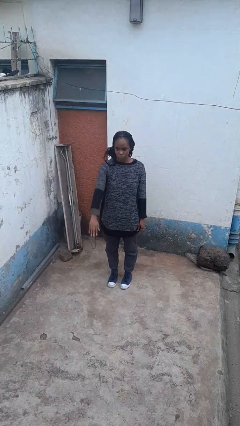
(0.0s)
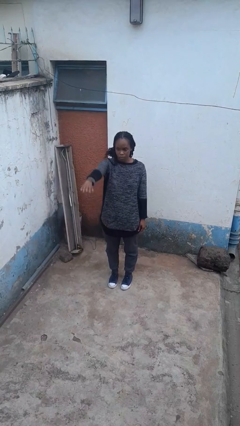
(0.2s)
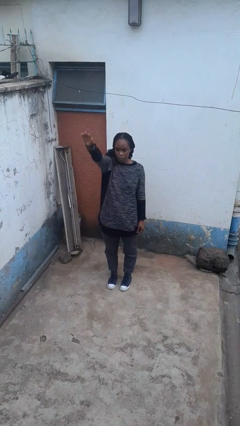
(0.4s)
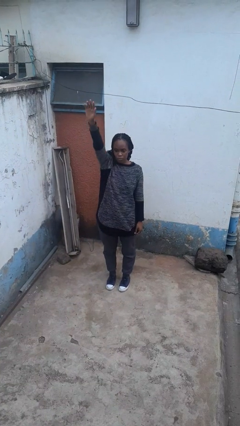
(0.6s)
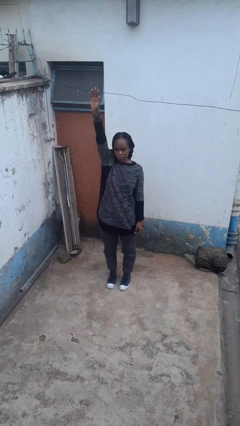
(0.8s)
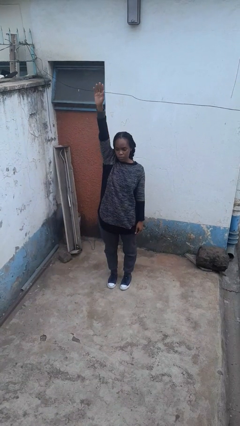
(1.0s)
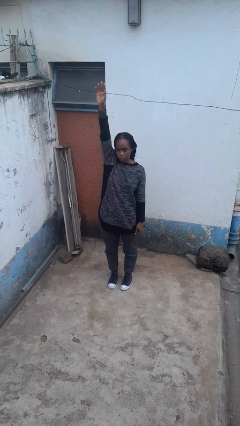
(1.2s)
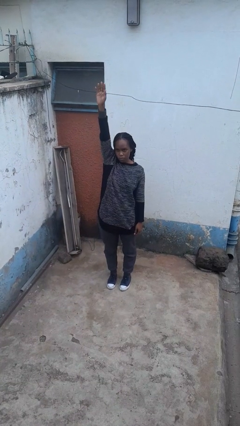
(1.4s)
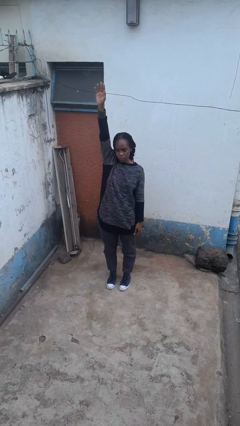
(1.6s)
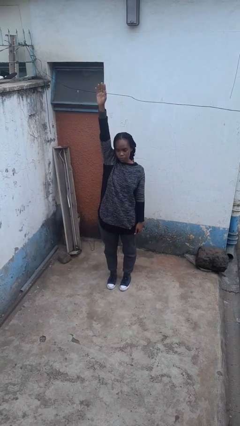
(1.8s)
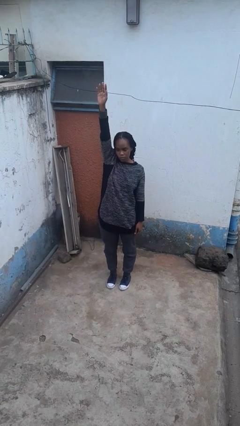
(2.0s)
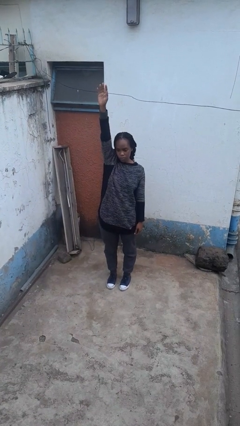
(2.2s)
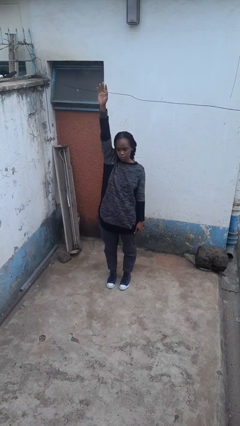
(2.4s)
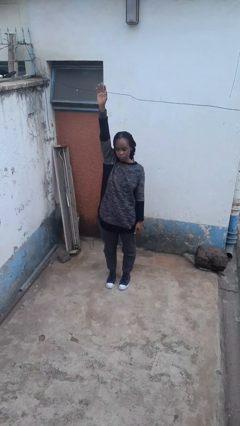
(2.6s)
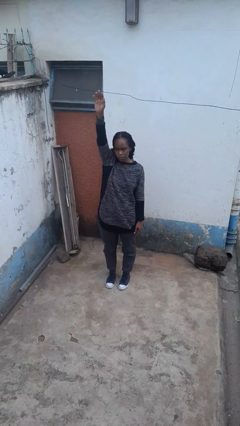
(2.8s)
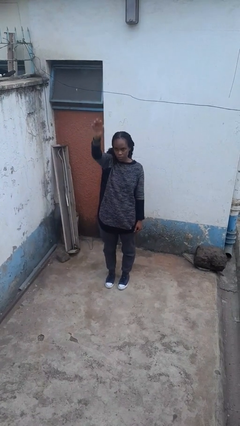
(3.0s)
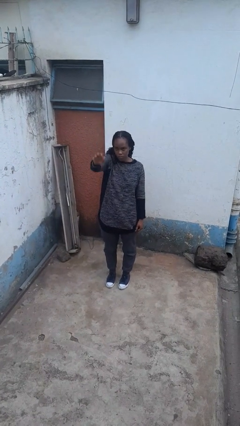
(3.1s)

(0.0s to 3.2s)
person gestures raise hand

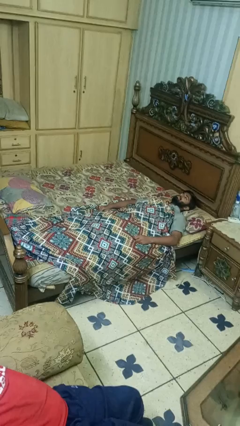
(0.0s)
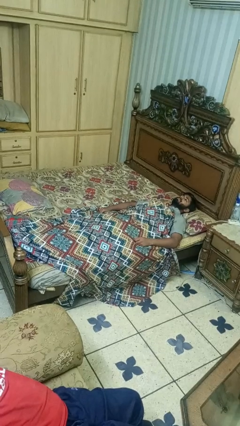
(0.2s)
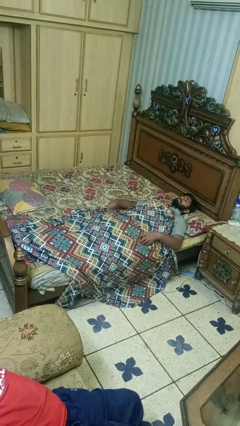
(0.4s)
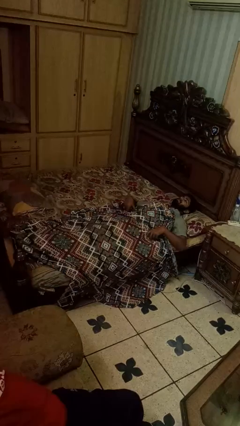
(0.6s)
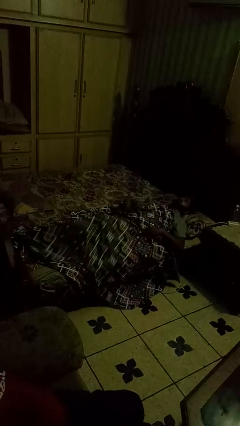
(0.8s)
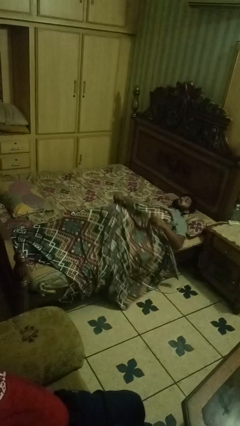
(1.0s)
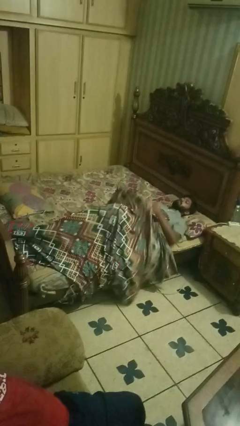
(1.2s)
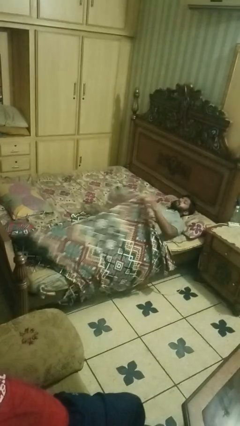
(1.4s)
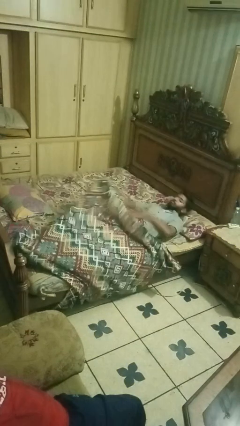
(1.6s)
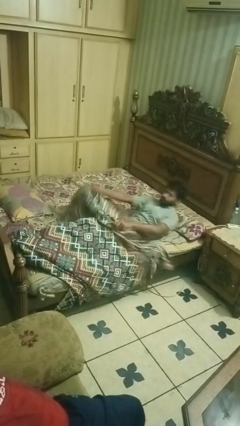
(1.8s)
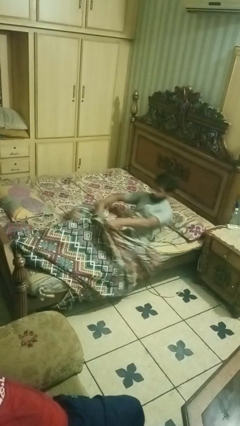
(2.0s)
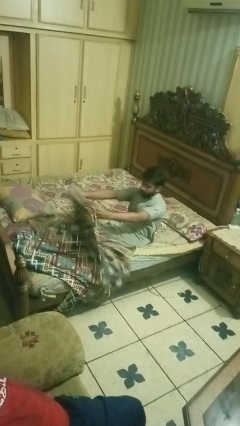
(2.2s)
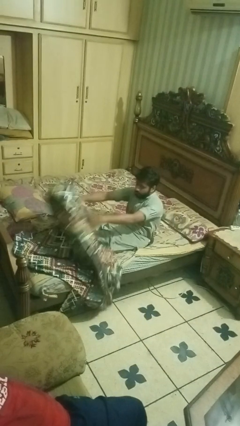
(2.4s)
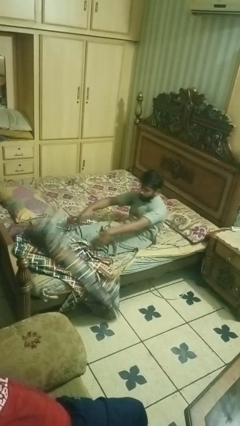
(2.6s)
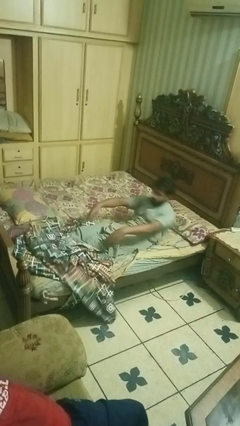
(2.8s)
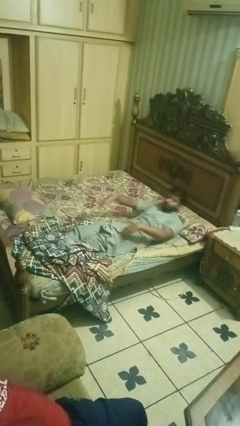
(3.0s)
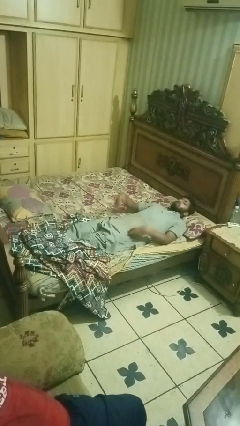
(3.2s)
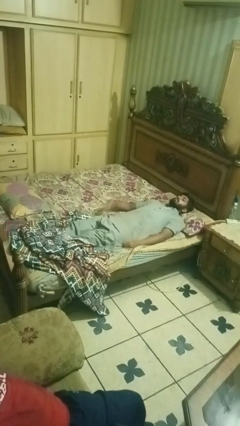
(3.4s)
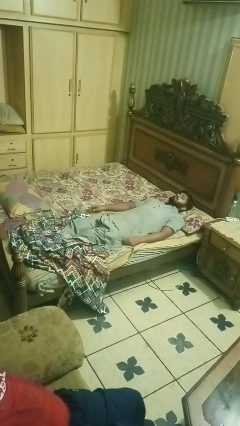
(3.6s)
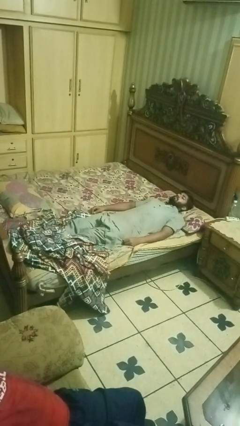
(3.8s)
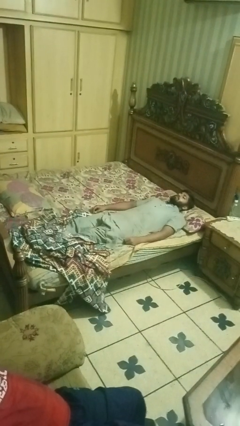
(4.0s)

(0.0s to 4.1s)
person uncovers with bedsheets

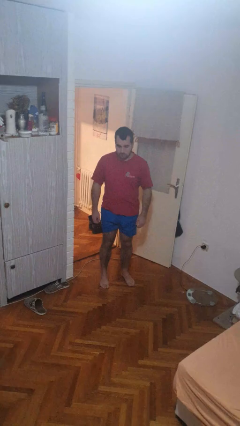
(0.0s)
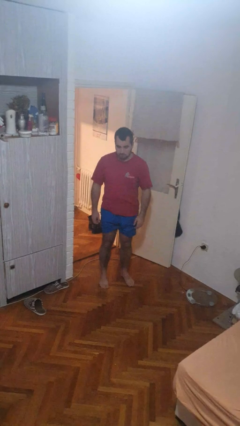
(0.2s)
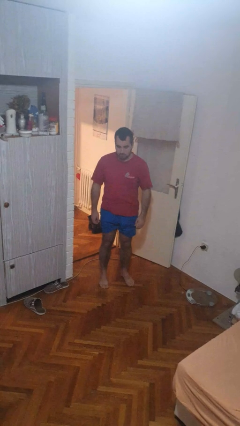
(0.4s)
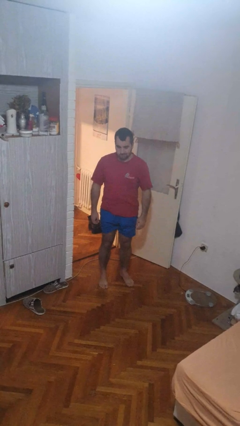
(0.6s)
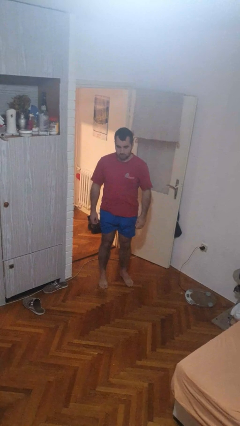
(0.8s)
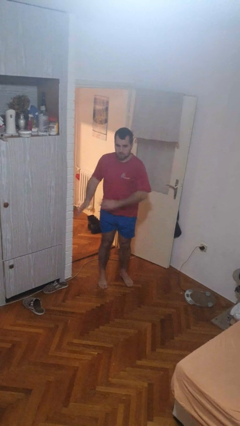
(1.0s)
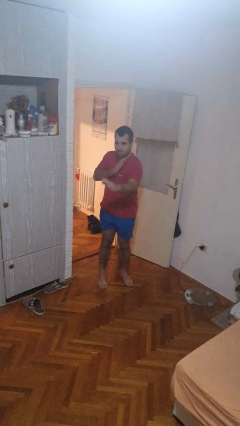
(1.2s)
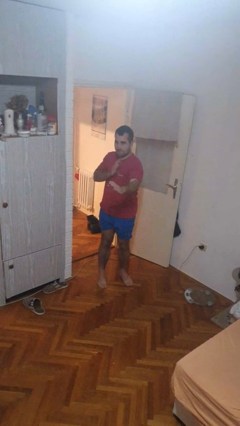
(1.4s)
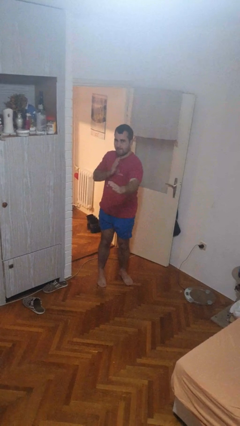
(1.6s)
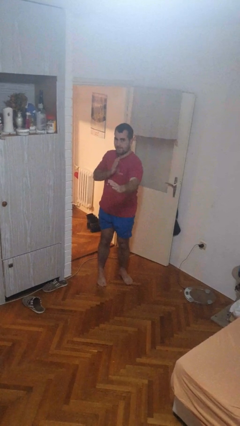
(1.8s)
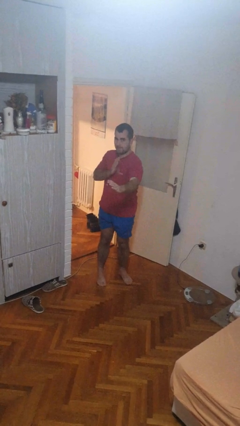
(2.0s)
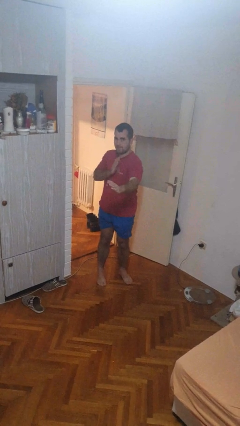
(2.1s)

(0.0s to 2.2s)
person karate chop

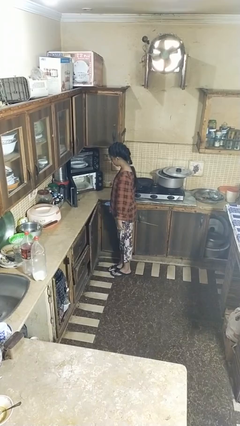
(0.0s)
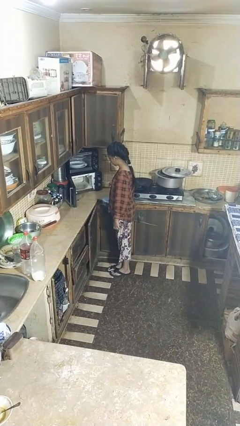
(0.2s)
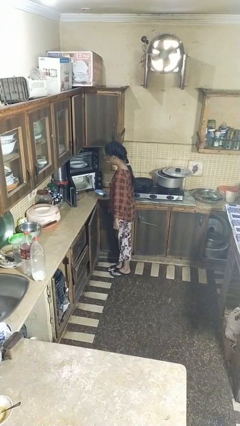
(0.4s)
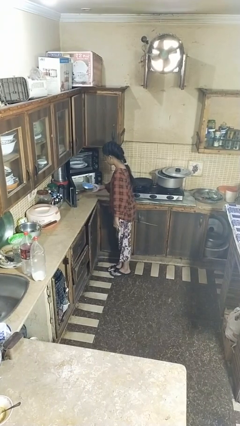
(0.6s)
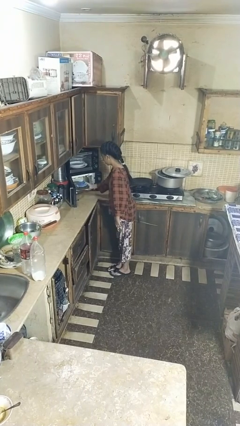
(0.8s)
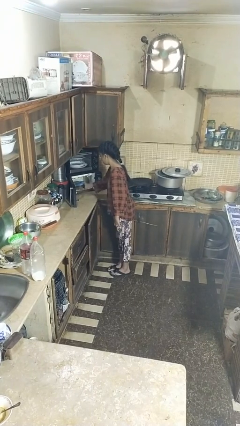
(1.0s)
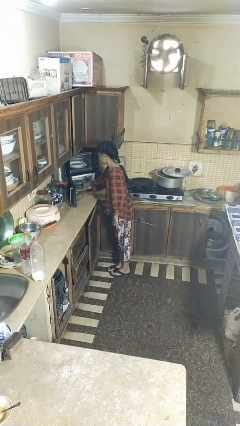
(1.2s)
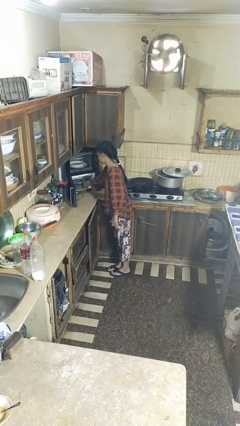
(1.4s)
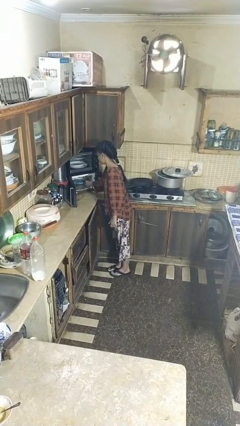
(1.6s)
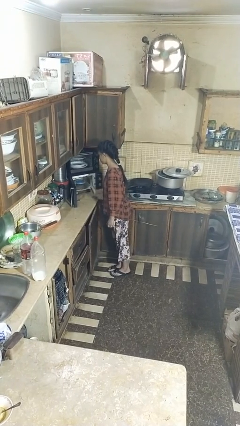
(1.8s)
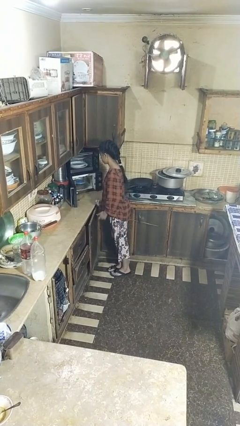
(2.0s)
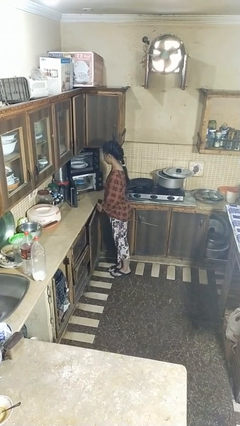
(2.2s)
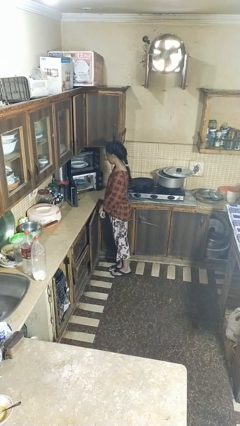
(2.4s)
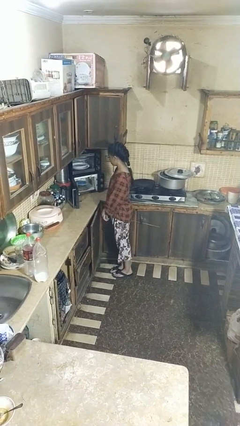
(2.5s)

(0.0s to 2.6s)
person puts object into microwave

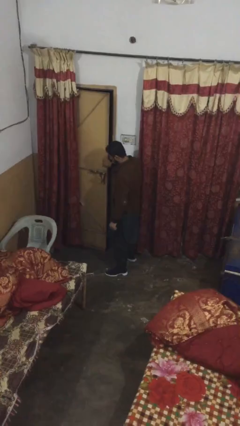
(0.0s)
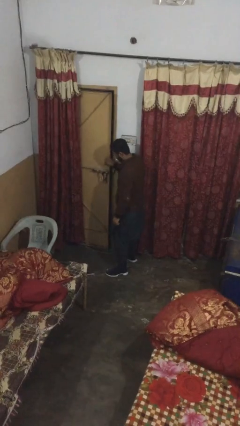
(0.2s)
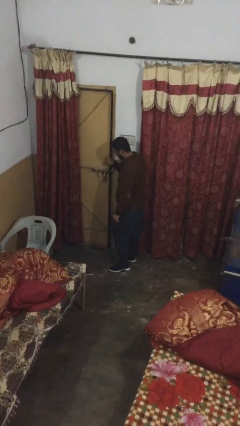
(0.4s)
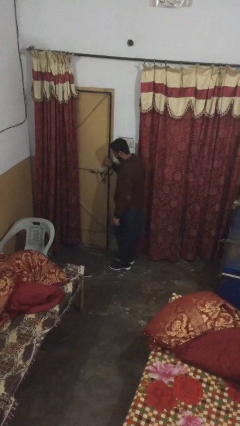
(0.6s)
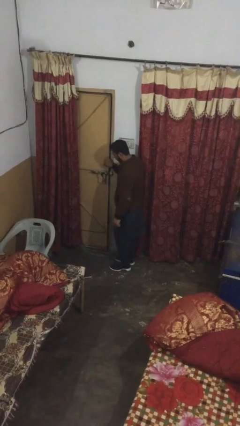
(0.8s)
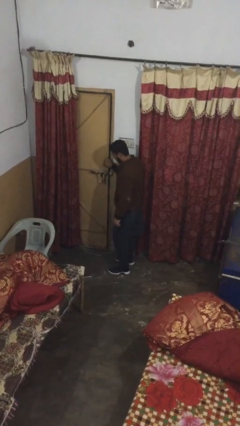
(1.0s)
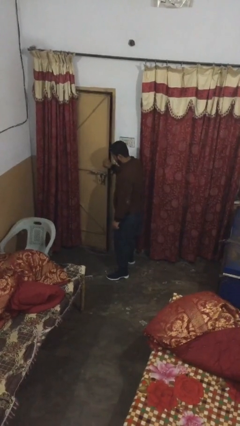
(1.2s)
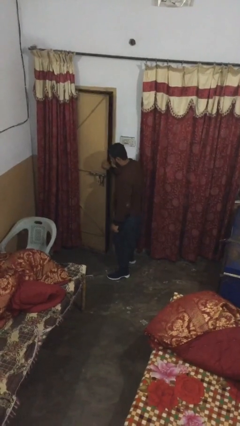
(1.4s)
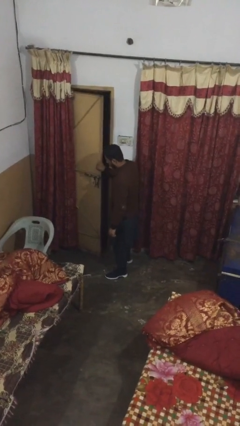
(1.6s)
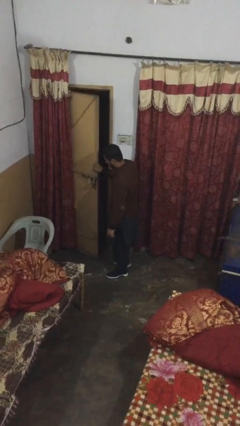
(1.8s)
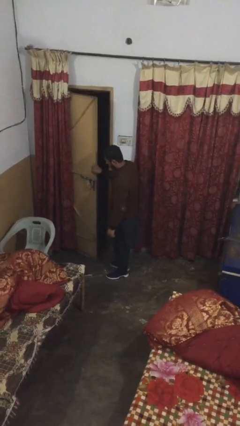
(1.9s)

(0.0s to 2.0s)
person opens facility door

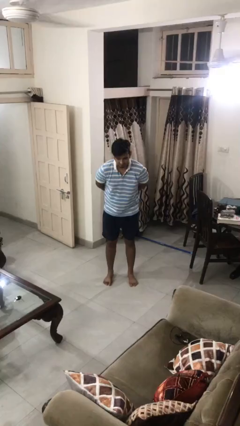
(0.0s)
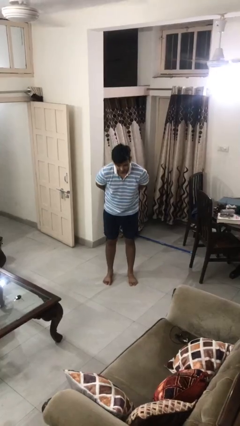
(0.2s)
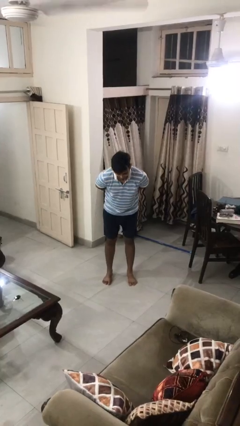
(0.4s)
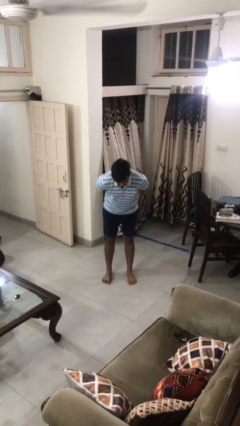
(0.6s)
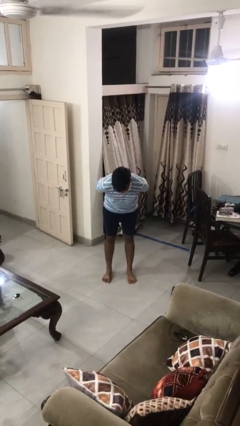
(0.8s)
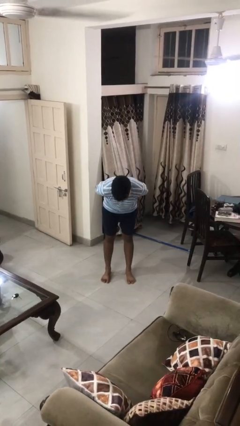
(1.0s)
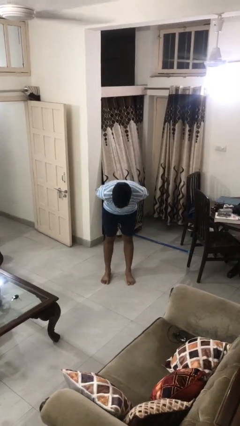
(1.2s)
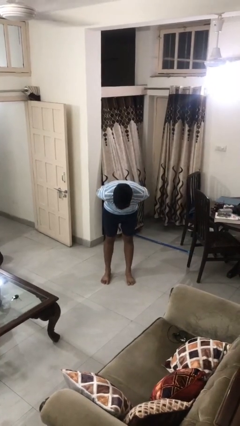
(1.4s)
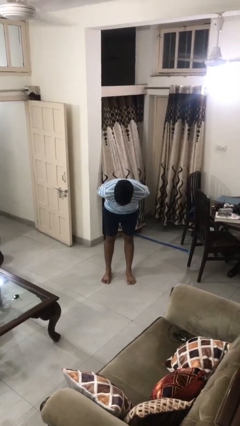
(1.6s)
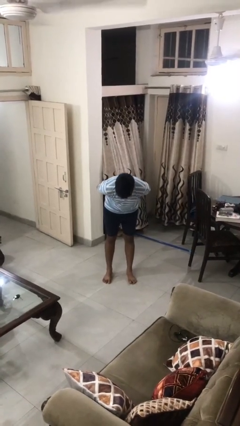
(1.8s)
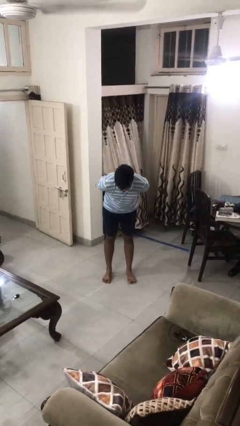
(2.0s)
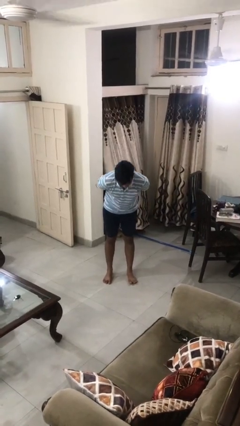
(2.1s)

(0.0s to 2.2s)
person bows

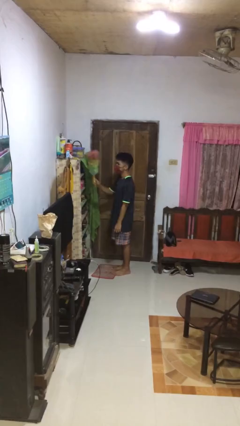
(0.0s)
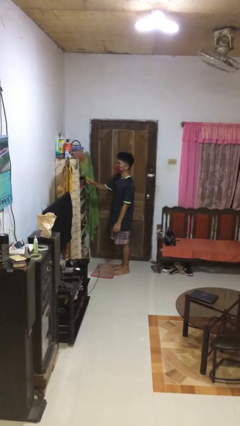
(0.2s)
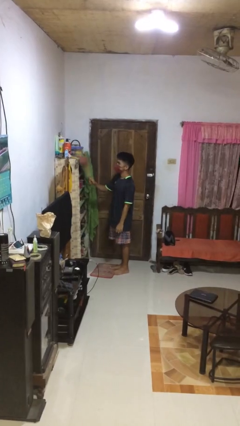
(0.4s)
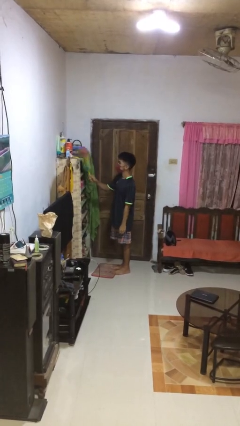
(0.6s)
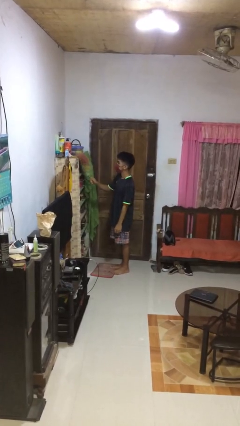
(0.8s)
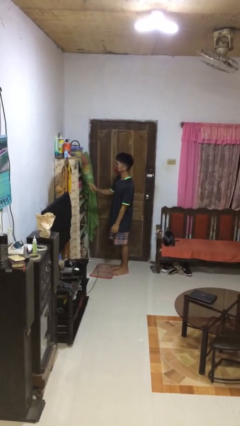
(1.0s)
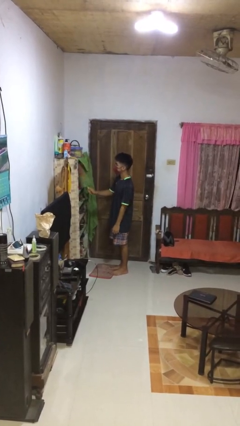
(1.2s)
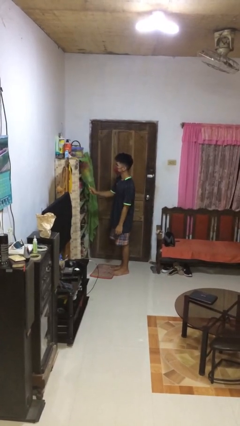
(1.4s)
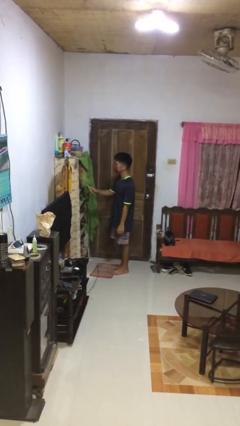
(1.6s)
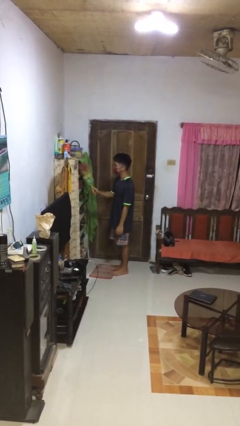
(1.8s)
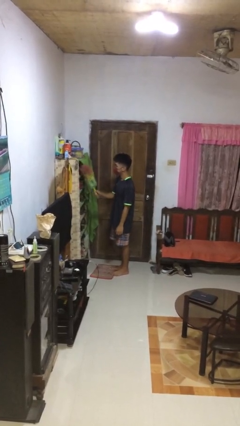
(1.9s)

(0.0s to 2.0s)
person dusts furniture
